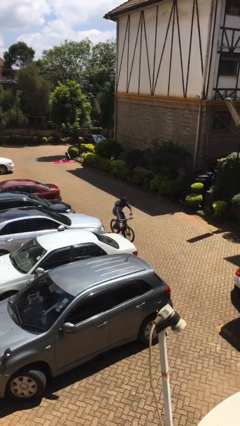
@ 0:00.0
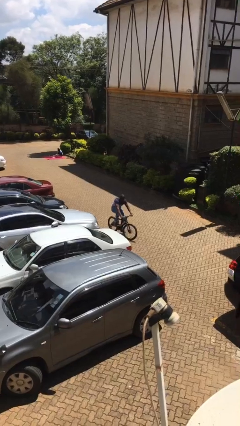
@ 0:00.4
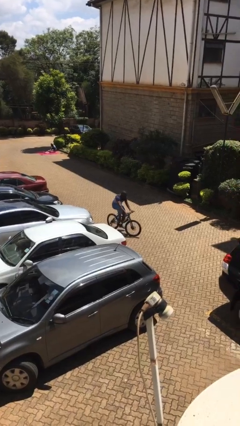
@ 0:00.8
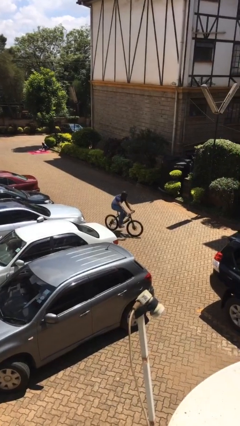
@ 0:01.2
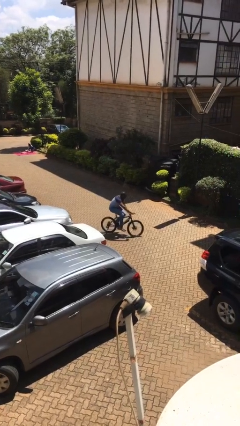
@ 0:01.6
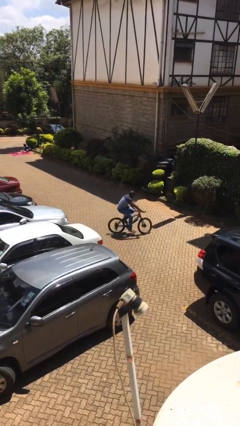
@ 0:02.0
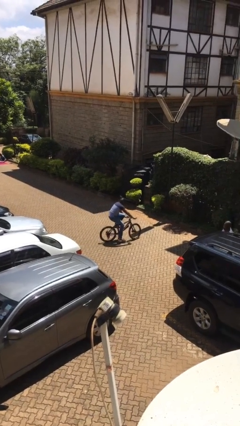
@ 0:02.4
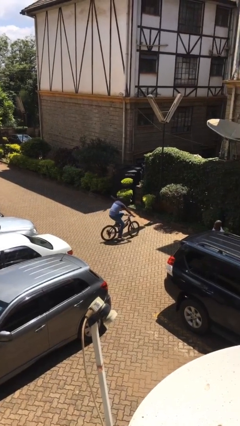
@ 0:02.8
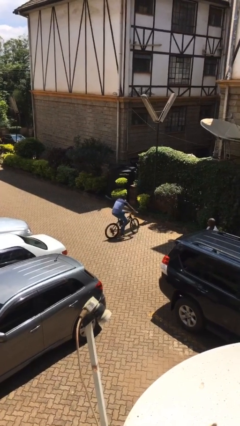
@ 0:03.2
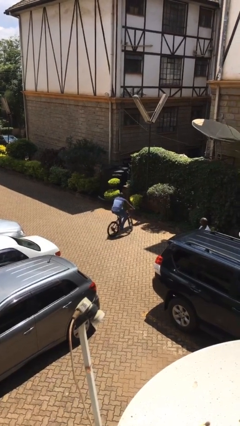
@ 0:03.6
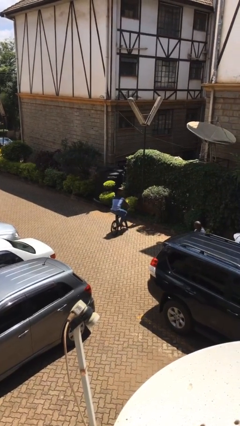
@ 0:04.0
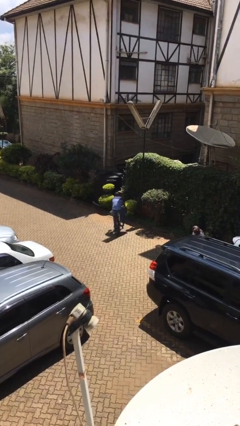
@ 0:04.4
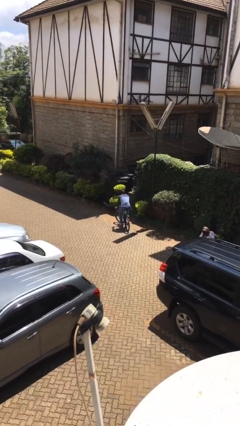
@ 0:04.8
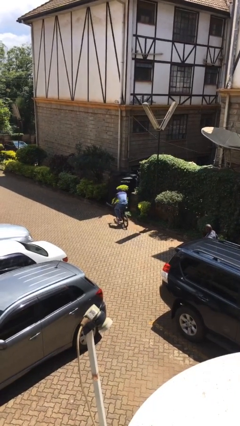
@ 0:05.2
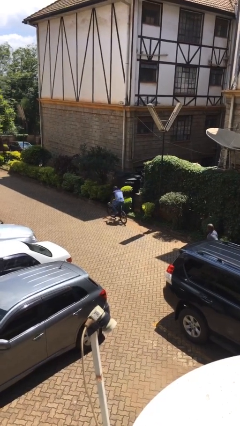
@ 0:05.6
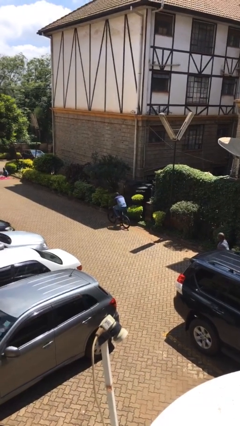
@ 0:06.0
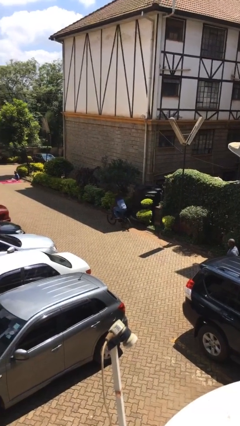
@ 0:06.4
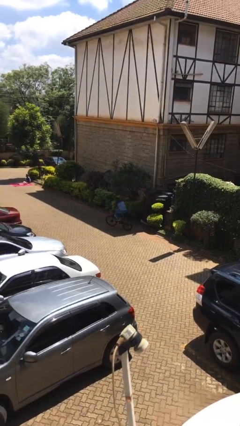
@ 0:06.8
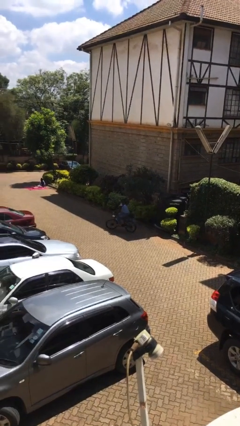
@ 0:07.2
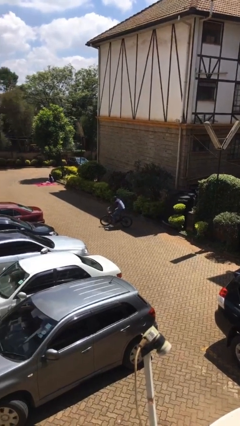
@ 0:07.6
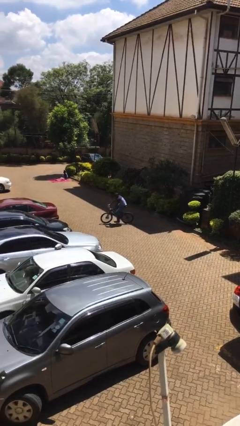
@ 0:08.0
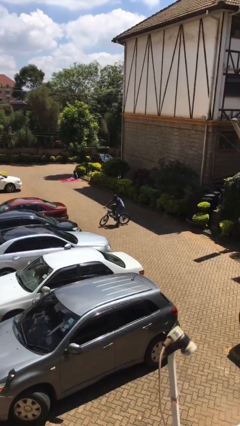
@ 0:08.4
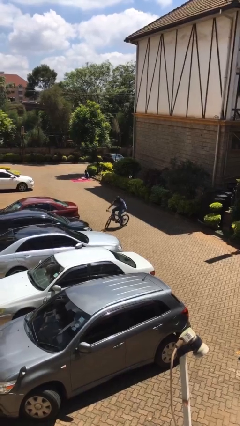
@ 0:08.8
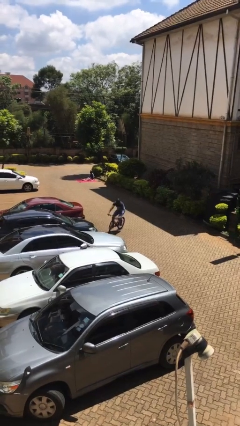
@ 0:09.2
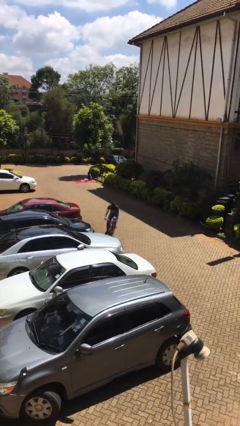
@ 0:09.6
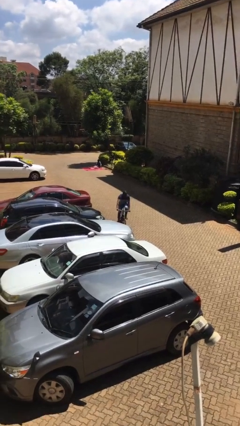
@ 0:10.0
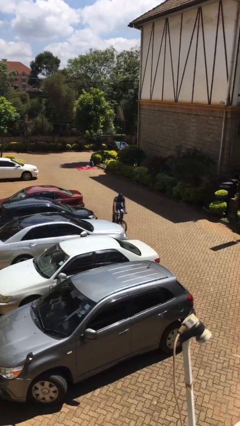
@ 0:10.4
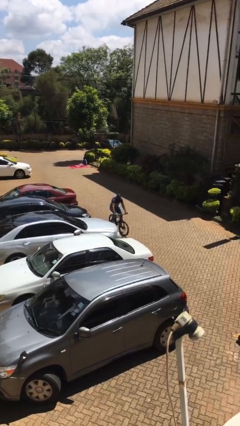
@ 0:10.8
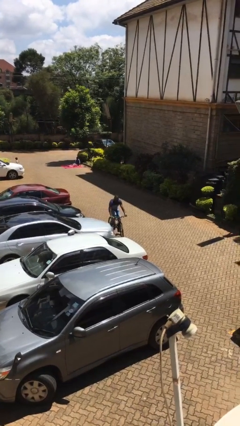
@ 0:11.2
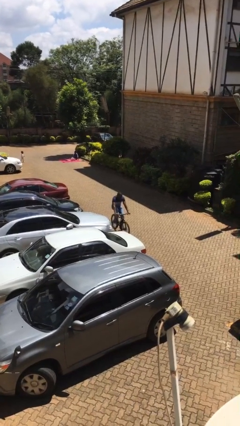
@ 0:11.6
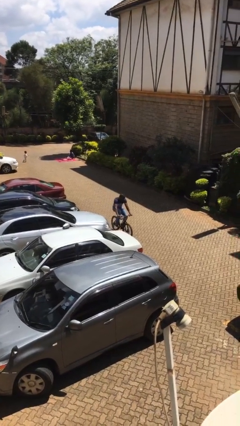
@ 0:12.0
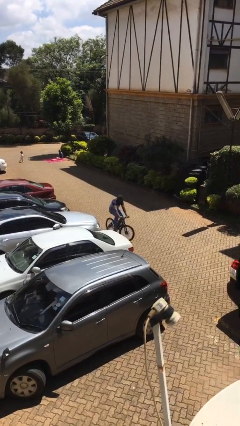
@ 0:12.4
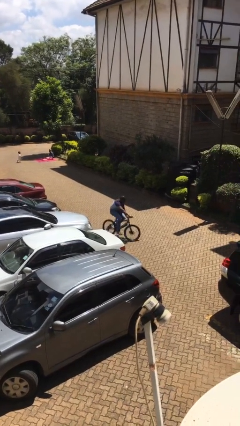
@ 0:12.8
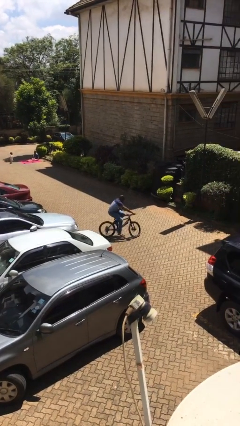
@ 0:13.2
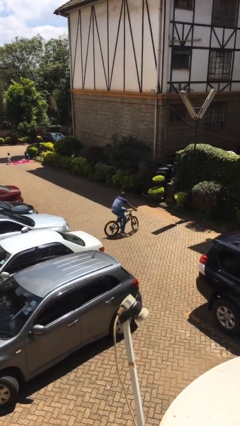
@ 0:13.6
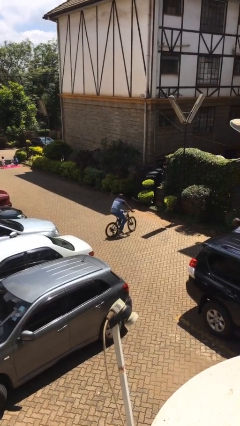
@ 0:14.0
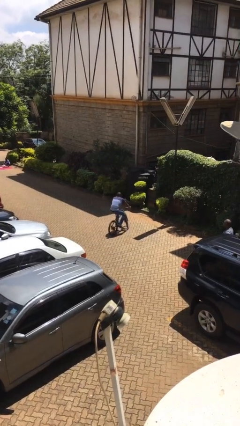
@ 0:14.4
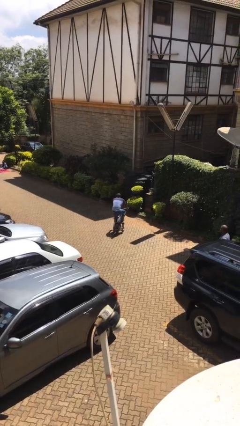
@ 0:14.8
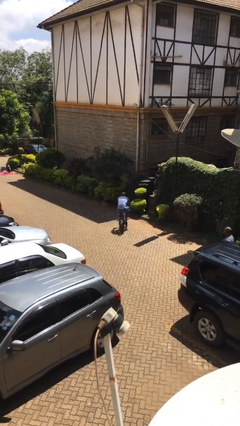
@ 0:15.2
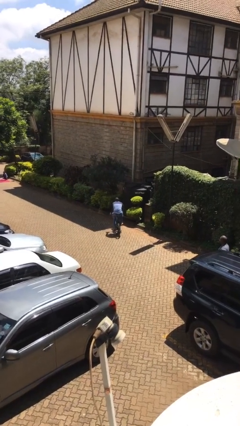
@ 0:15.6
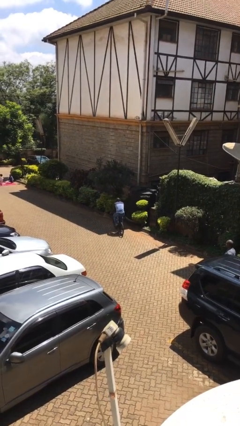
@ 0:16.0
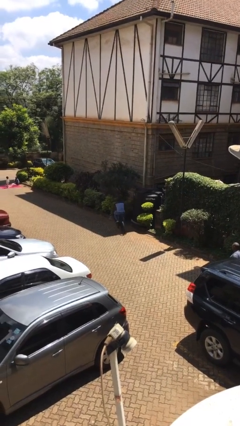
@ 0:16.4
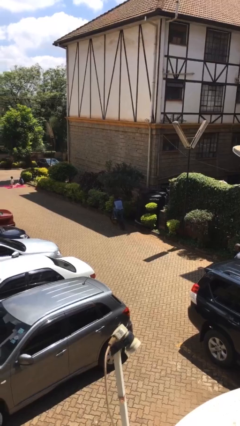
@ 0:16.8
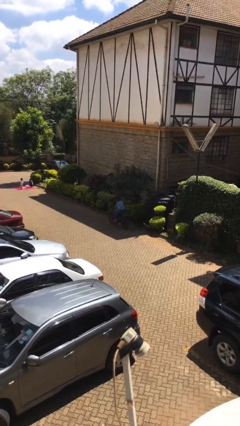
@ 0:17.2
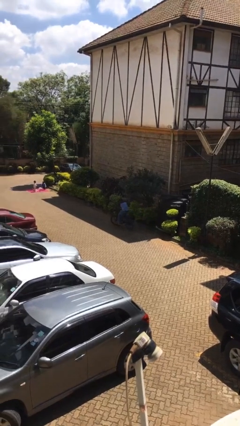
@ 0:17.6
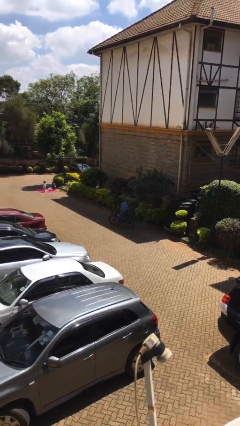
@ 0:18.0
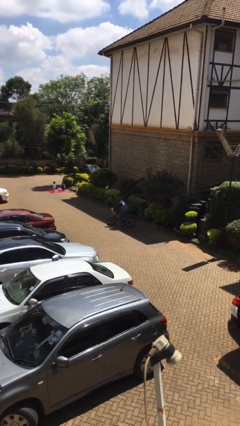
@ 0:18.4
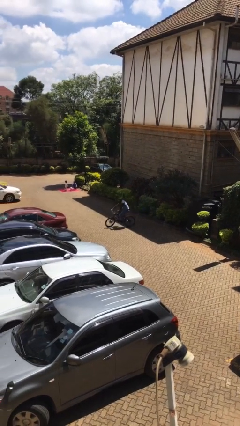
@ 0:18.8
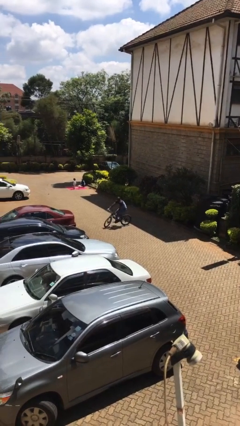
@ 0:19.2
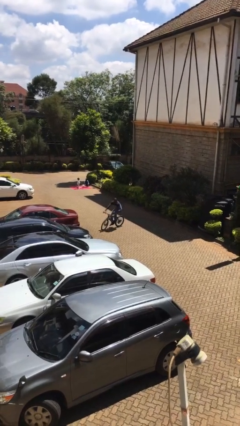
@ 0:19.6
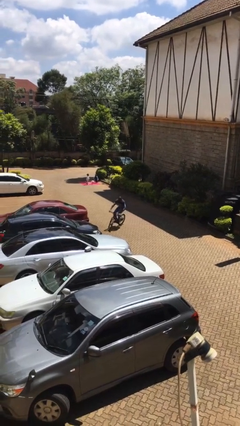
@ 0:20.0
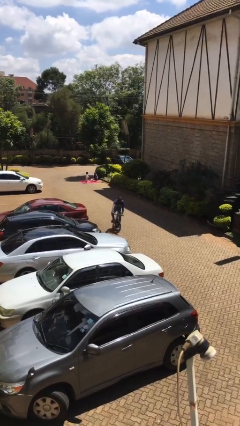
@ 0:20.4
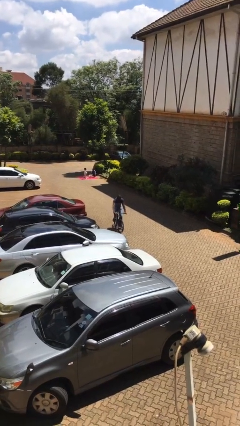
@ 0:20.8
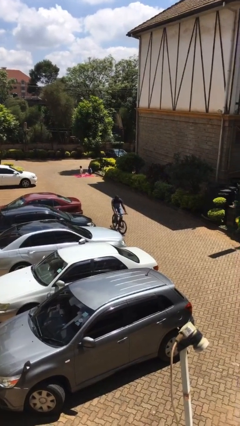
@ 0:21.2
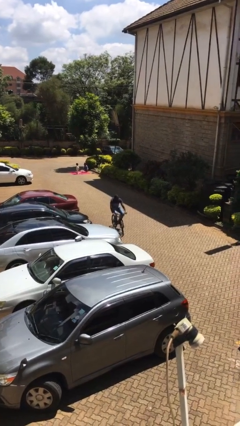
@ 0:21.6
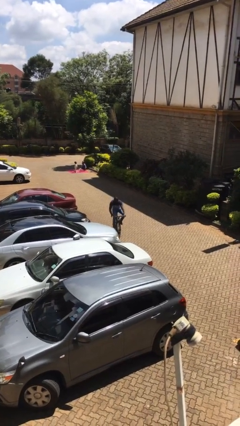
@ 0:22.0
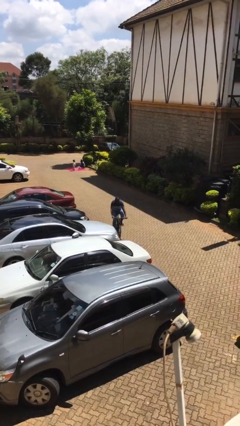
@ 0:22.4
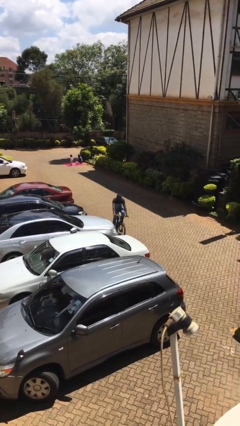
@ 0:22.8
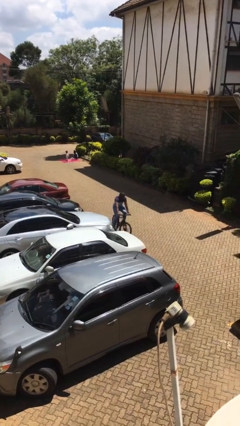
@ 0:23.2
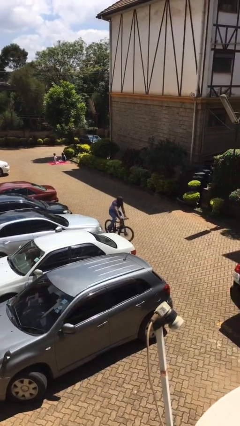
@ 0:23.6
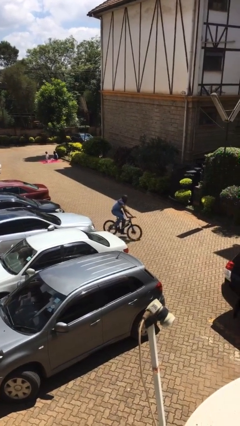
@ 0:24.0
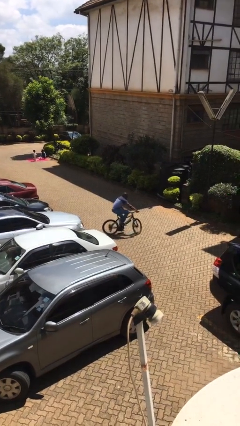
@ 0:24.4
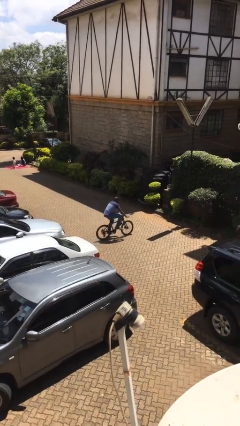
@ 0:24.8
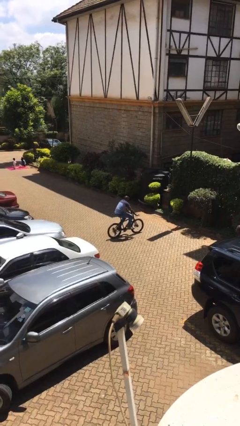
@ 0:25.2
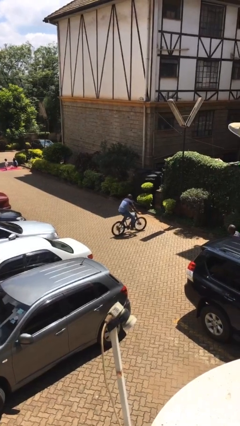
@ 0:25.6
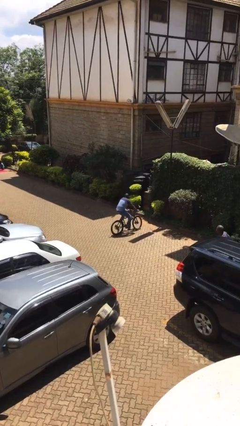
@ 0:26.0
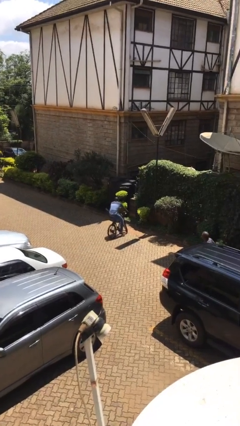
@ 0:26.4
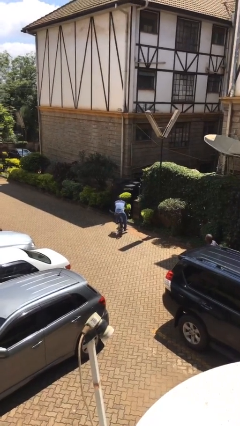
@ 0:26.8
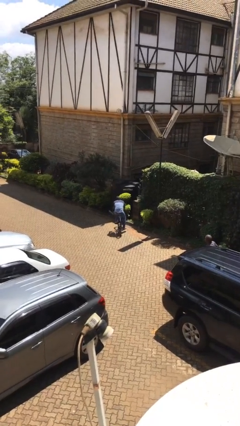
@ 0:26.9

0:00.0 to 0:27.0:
person rides bicycle

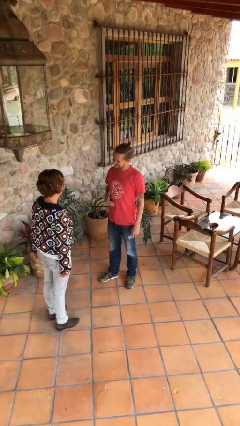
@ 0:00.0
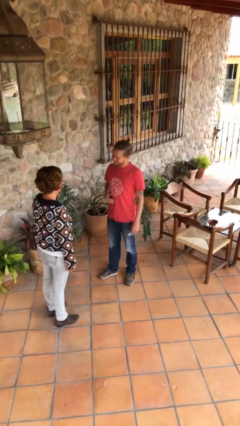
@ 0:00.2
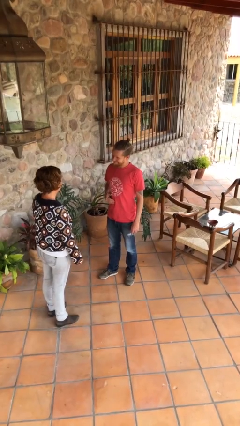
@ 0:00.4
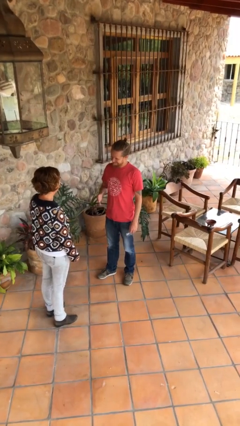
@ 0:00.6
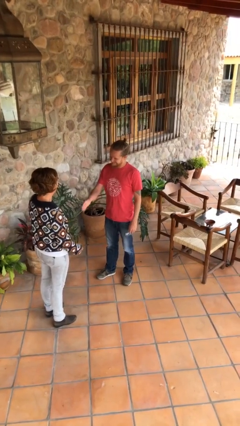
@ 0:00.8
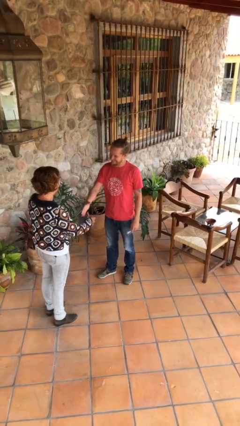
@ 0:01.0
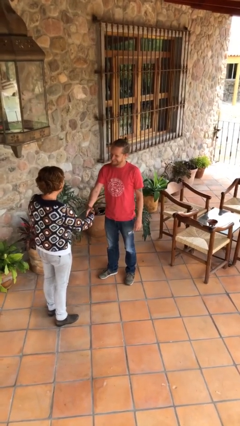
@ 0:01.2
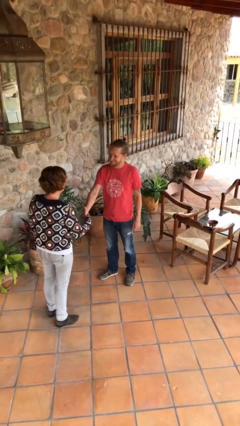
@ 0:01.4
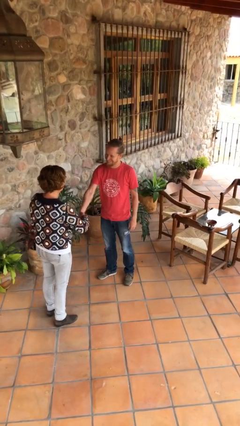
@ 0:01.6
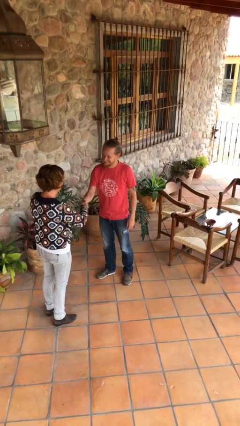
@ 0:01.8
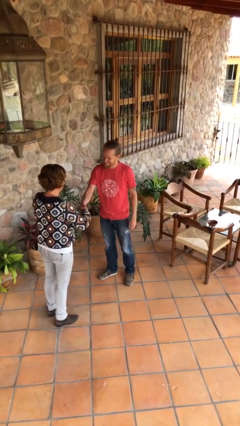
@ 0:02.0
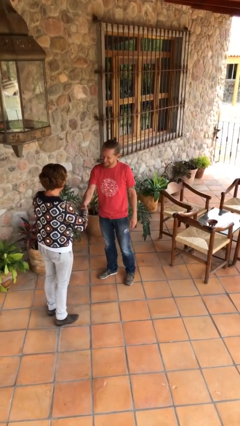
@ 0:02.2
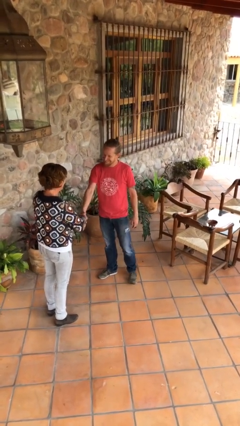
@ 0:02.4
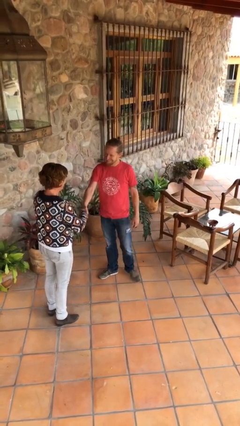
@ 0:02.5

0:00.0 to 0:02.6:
person shakes hand

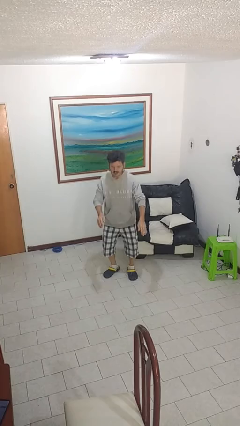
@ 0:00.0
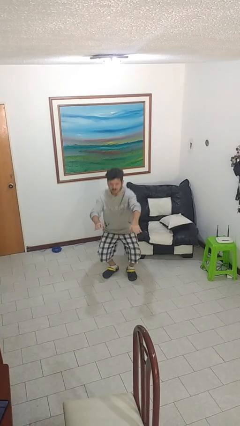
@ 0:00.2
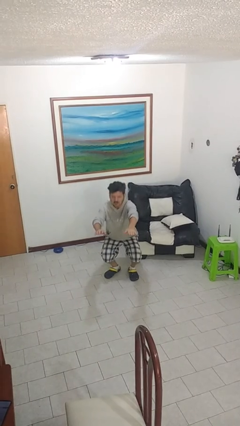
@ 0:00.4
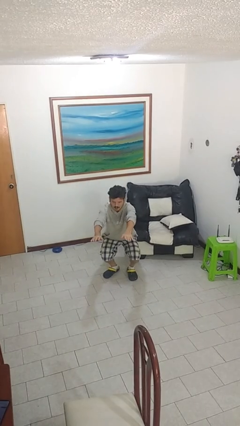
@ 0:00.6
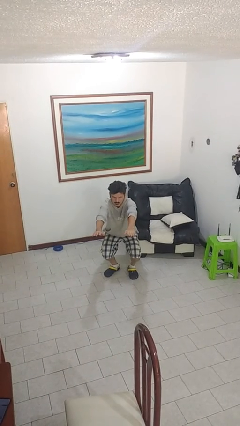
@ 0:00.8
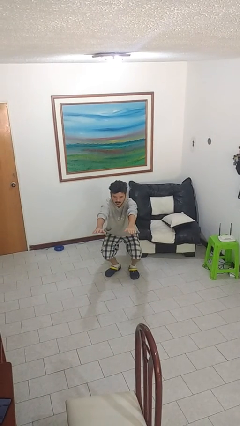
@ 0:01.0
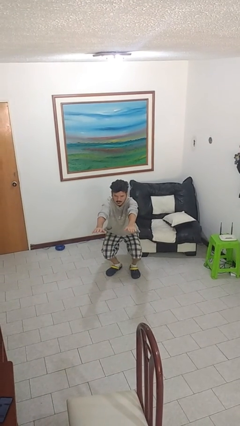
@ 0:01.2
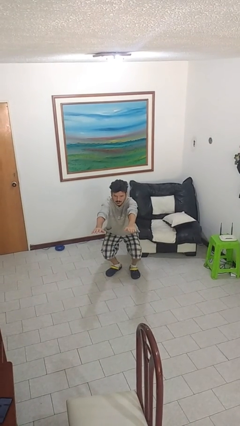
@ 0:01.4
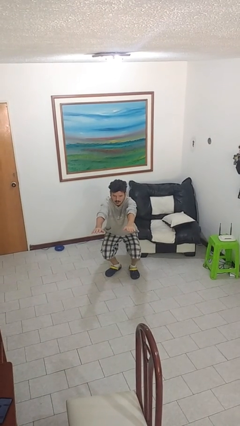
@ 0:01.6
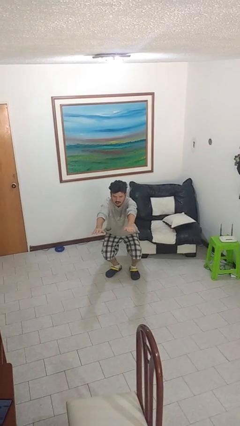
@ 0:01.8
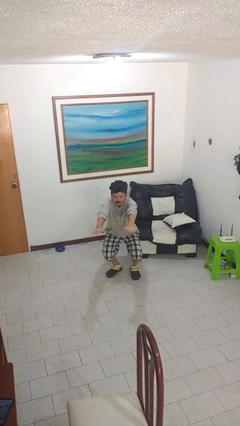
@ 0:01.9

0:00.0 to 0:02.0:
person squats
